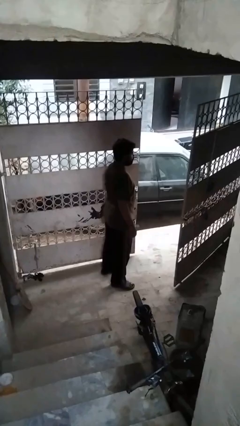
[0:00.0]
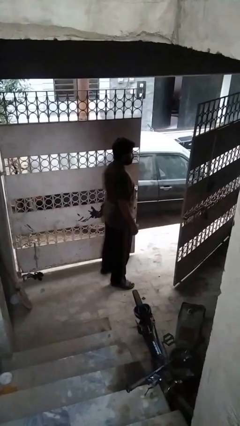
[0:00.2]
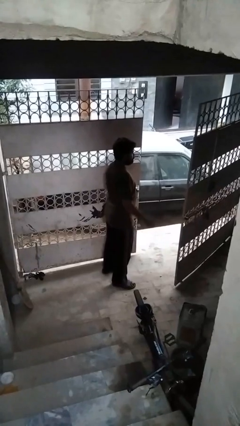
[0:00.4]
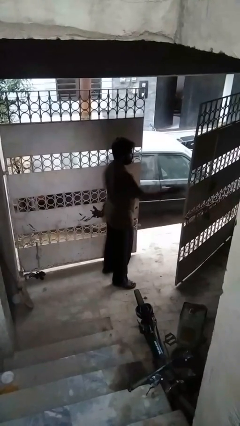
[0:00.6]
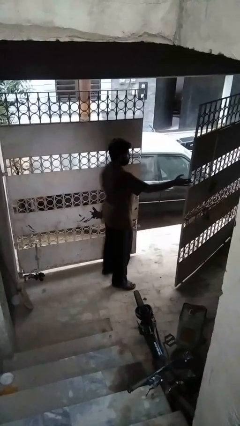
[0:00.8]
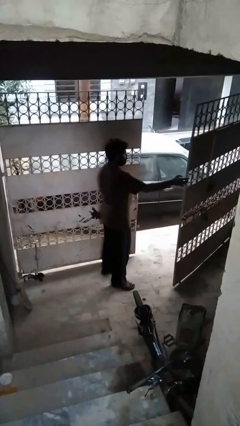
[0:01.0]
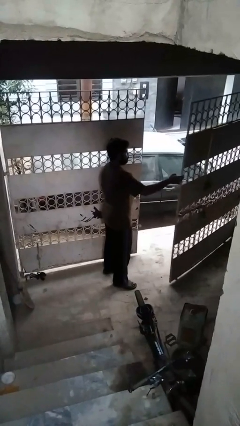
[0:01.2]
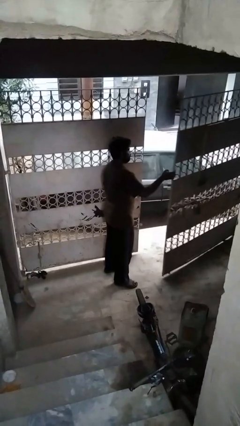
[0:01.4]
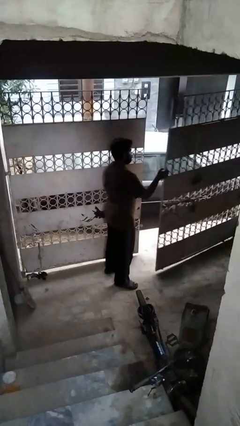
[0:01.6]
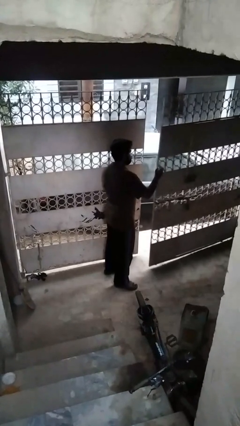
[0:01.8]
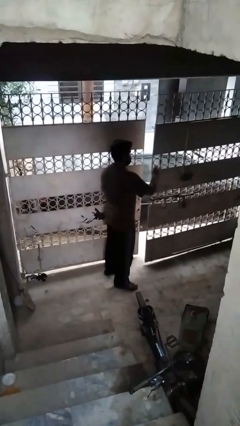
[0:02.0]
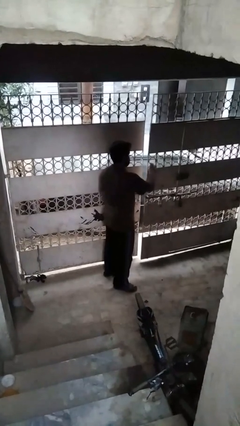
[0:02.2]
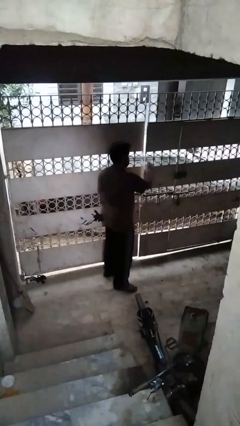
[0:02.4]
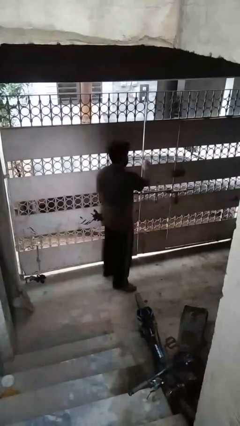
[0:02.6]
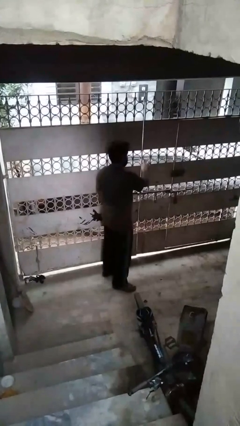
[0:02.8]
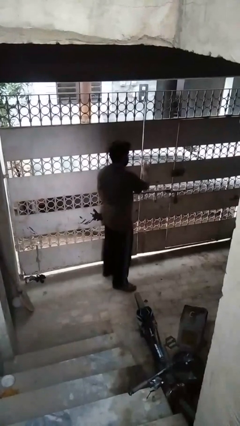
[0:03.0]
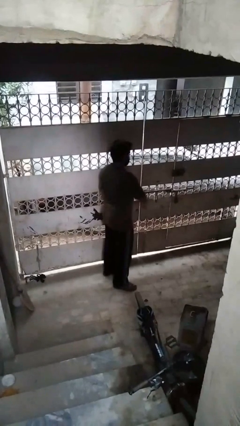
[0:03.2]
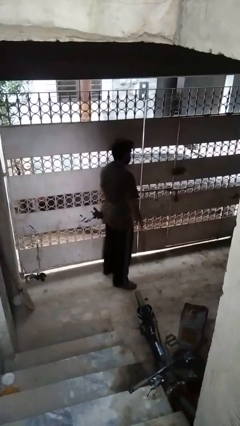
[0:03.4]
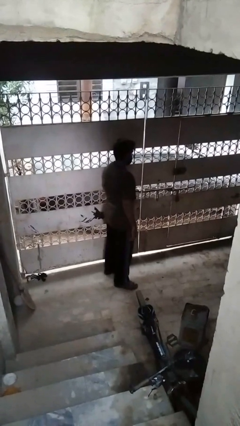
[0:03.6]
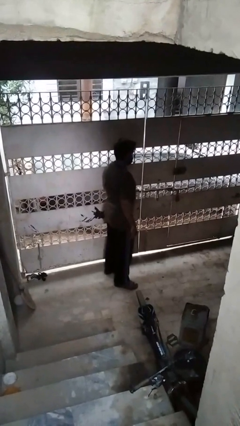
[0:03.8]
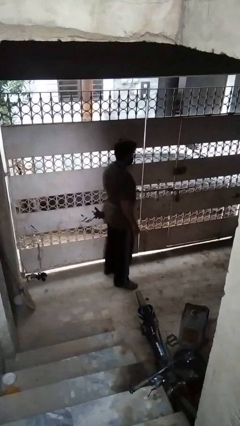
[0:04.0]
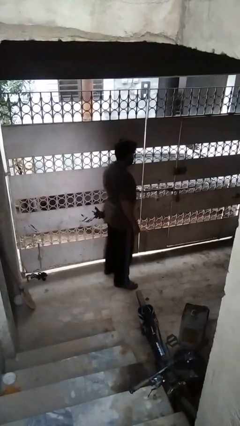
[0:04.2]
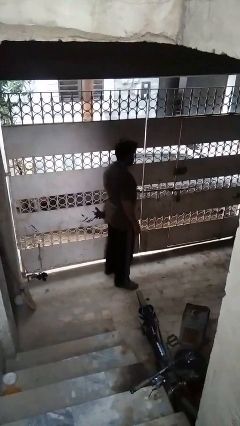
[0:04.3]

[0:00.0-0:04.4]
person closes gate

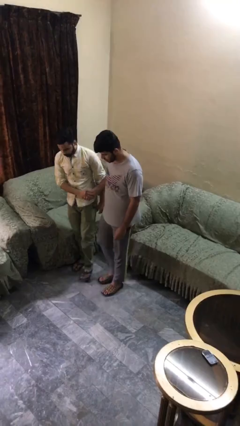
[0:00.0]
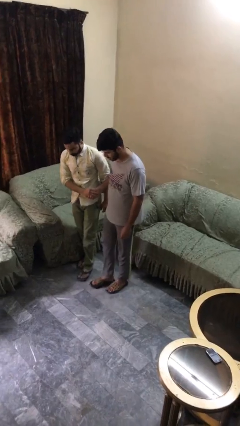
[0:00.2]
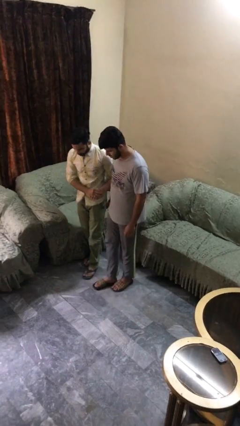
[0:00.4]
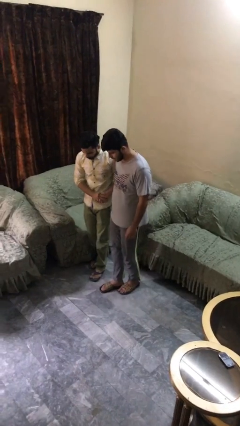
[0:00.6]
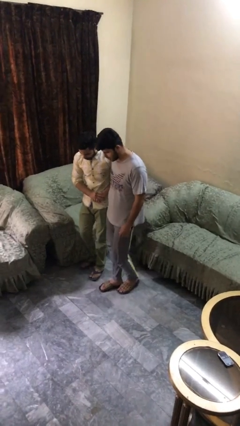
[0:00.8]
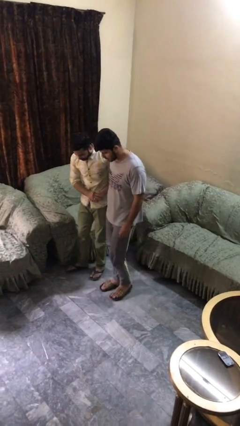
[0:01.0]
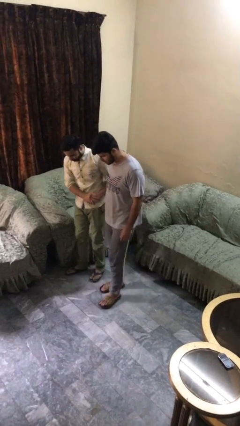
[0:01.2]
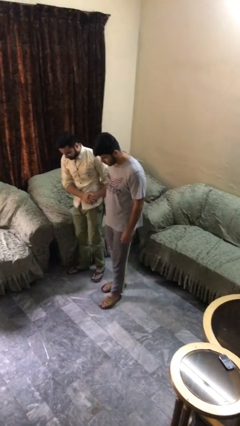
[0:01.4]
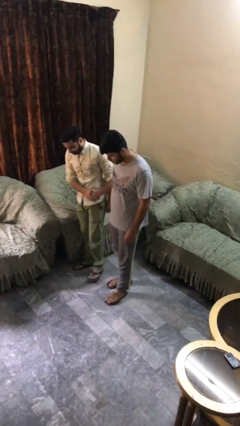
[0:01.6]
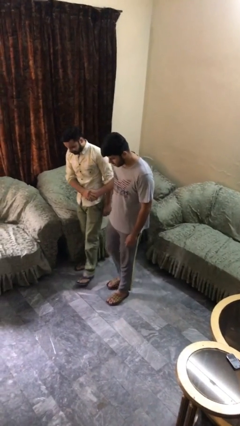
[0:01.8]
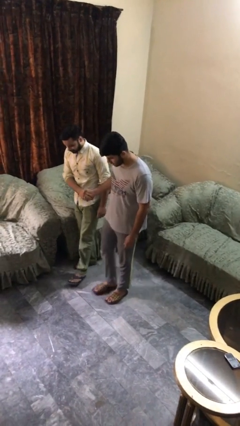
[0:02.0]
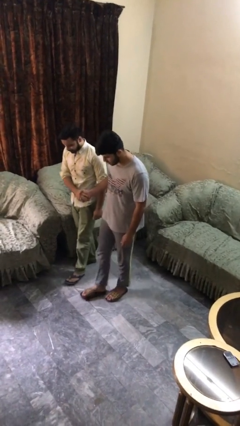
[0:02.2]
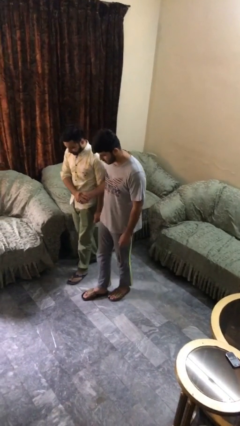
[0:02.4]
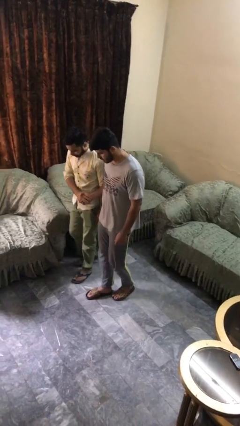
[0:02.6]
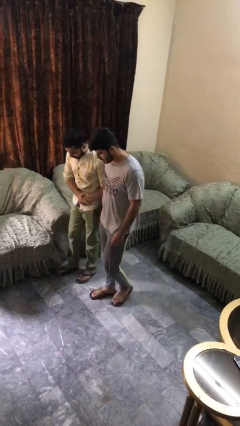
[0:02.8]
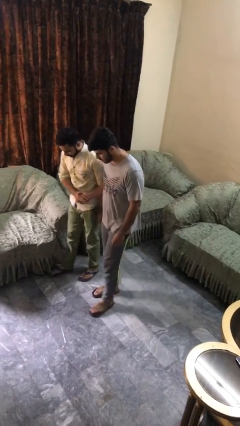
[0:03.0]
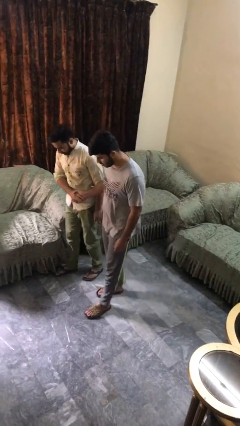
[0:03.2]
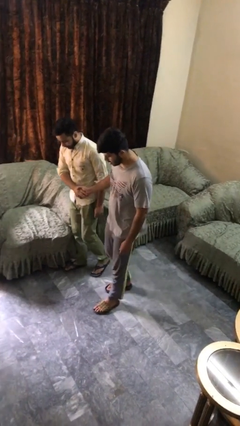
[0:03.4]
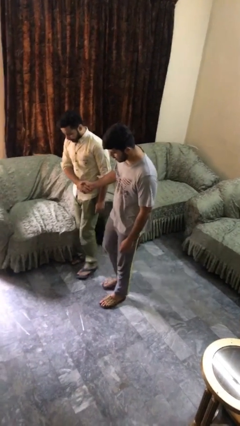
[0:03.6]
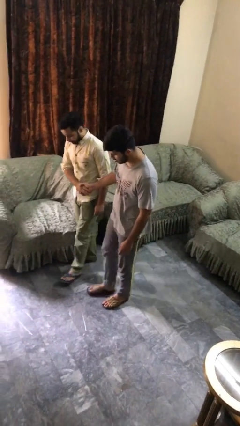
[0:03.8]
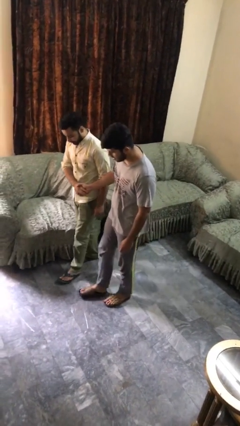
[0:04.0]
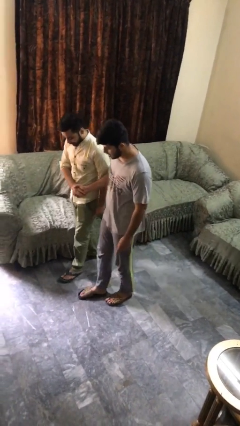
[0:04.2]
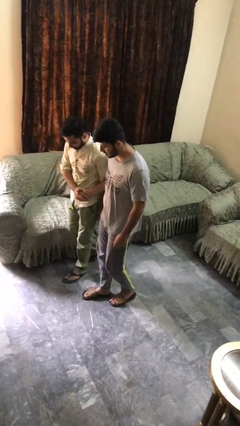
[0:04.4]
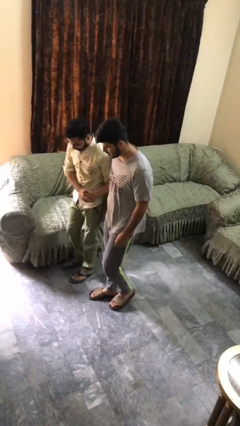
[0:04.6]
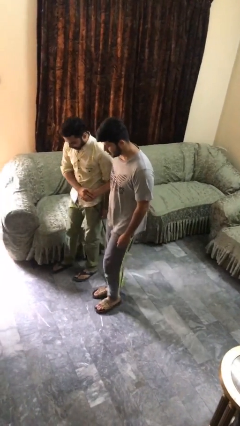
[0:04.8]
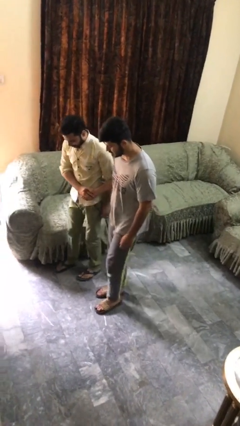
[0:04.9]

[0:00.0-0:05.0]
person talks to person

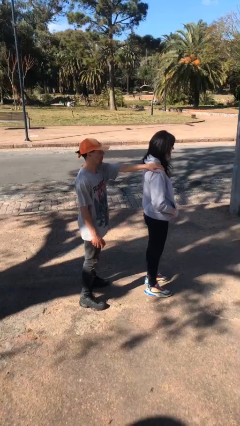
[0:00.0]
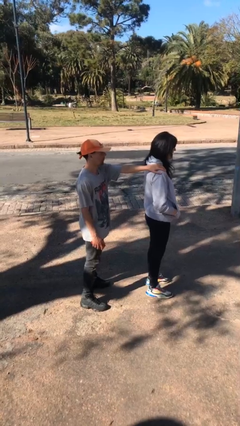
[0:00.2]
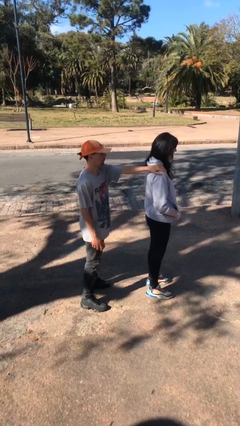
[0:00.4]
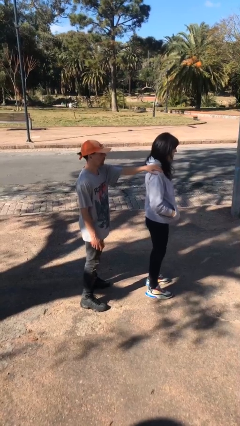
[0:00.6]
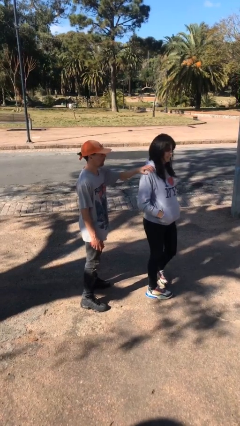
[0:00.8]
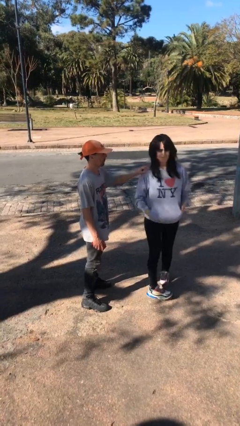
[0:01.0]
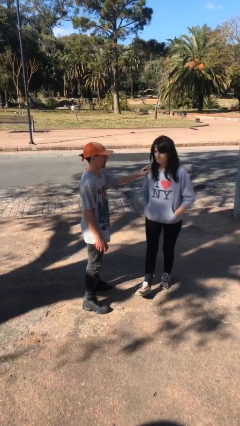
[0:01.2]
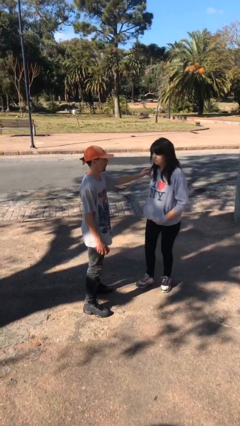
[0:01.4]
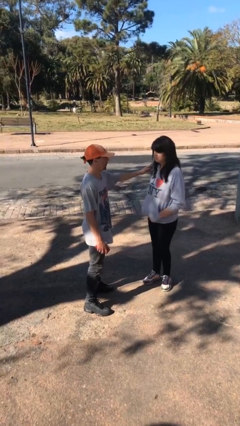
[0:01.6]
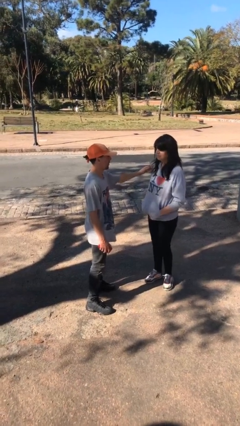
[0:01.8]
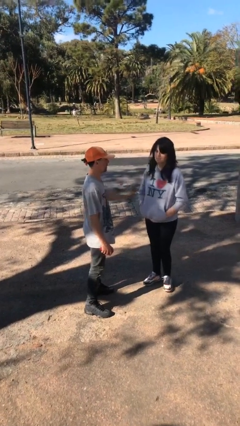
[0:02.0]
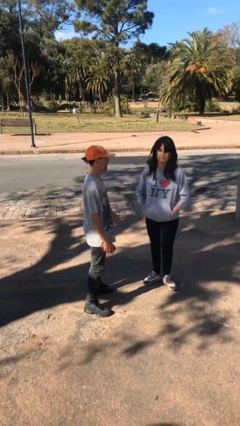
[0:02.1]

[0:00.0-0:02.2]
person spins person around

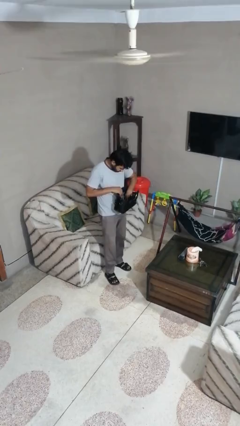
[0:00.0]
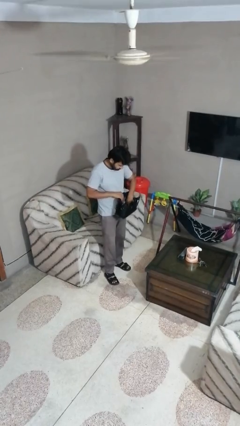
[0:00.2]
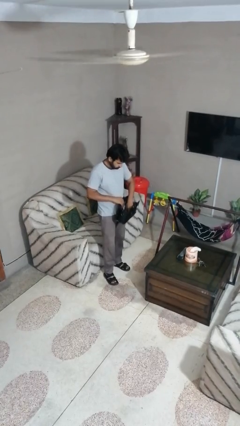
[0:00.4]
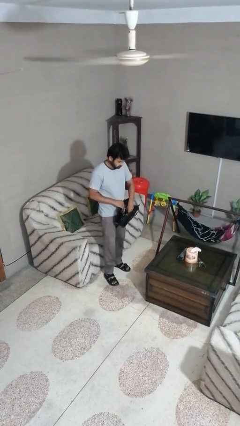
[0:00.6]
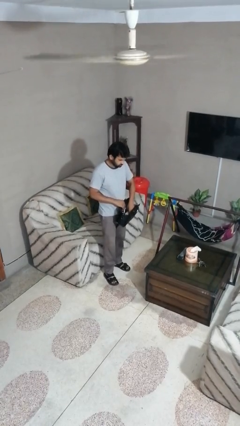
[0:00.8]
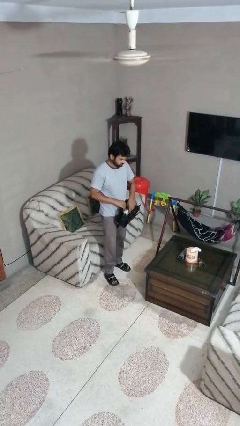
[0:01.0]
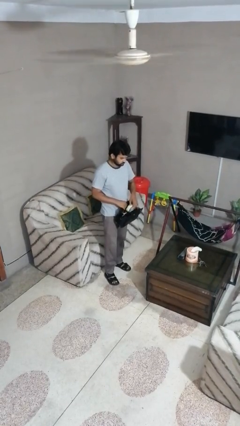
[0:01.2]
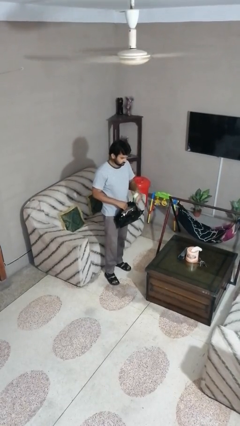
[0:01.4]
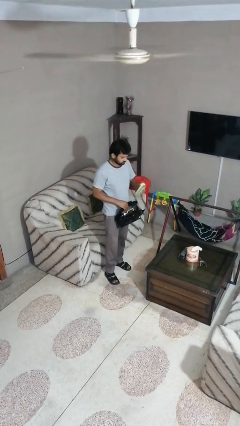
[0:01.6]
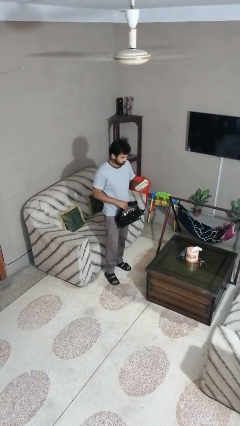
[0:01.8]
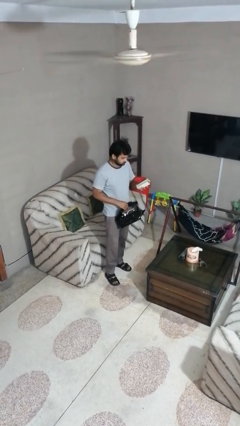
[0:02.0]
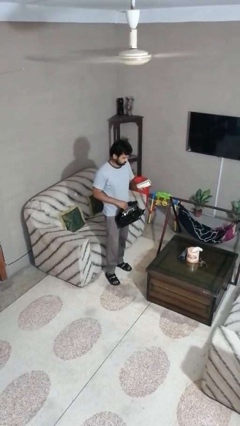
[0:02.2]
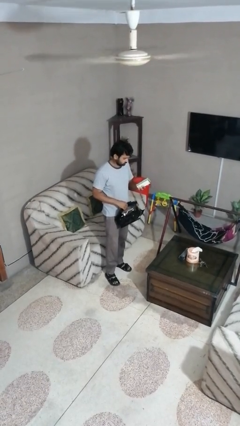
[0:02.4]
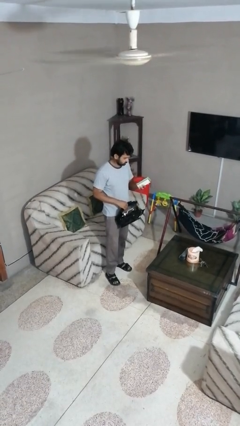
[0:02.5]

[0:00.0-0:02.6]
person takes object from purse

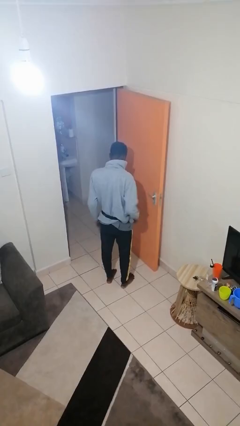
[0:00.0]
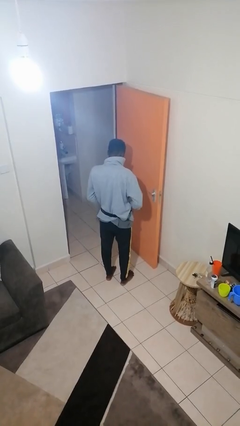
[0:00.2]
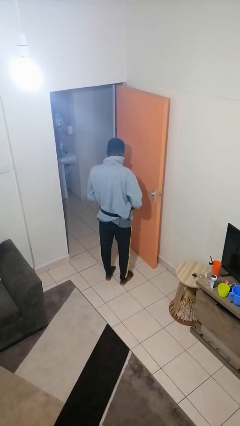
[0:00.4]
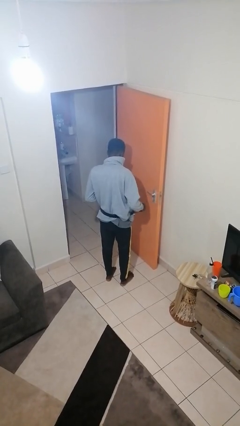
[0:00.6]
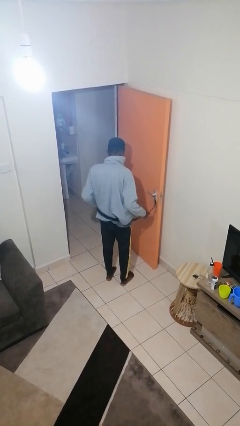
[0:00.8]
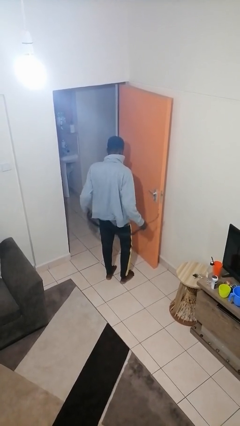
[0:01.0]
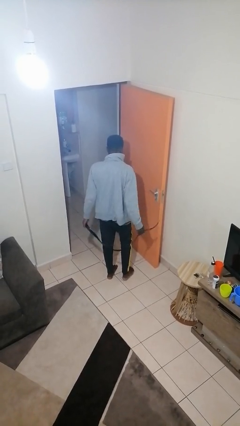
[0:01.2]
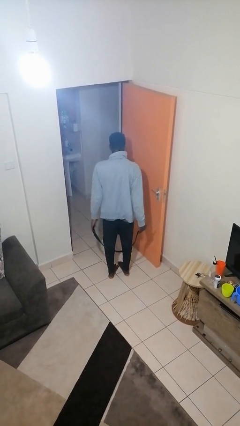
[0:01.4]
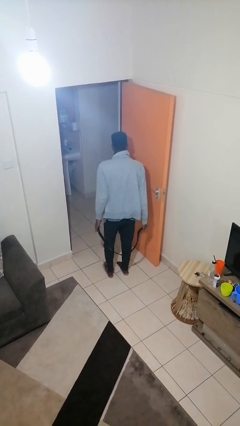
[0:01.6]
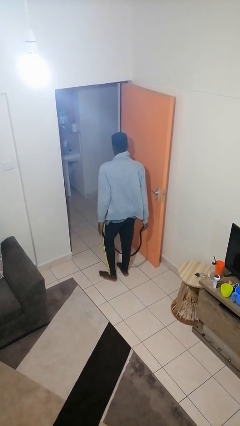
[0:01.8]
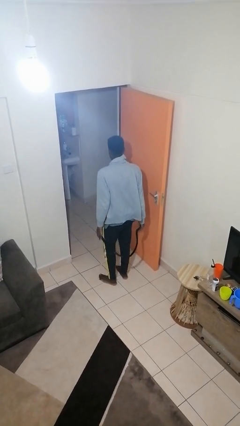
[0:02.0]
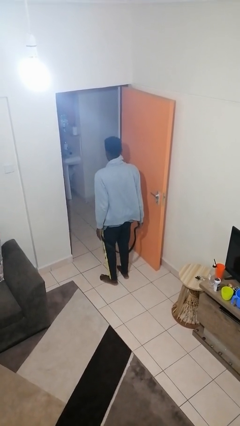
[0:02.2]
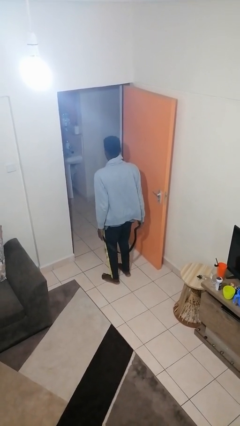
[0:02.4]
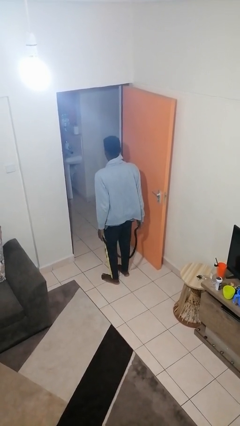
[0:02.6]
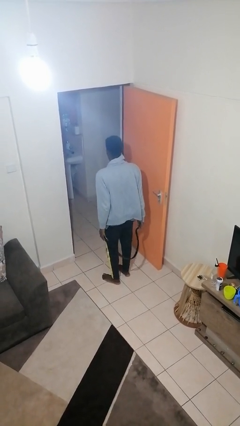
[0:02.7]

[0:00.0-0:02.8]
person takes off belt

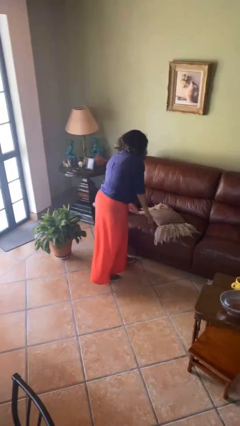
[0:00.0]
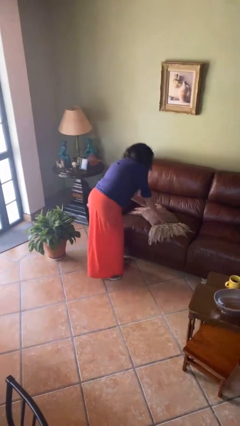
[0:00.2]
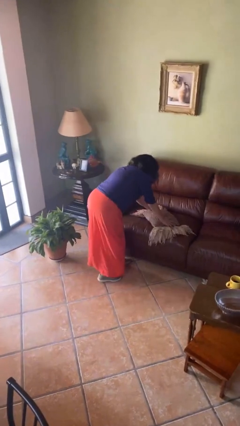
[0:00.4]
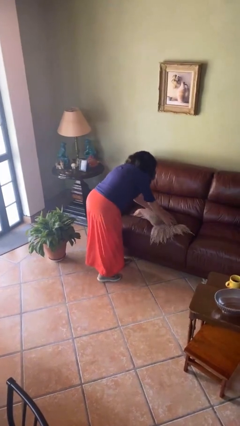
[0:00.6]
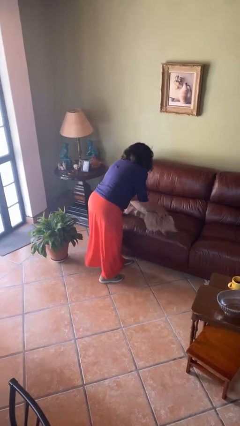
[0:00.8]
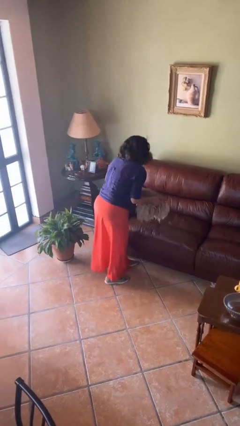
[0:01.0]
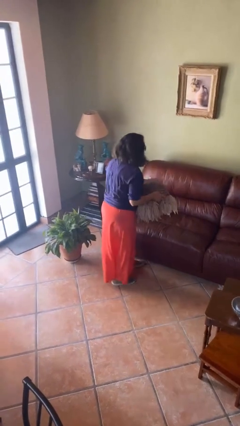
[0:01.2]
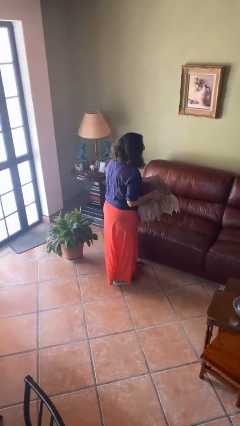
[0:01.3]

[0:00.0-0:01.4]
person picks up object from couch
